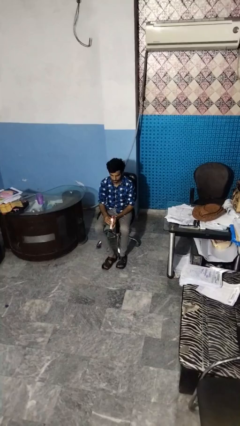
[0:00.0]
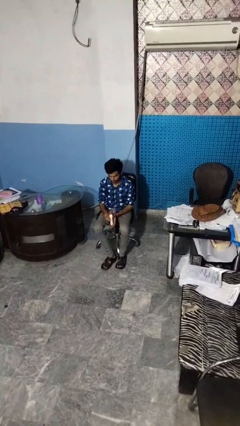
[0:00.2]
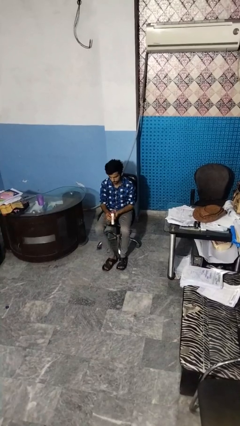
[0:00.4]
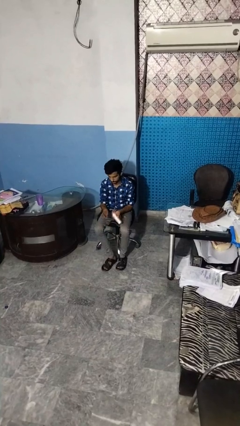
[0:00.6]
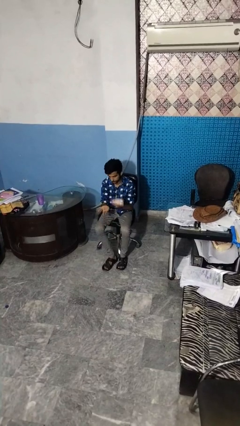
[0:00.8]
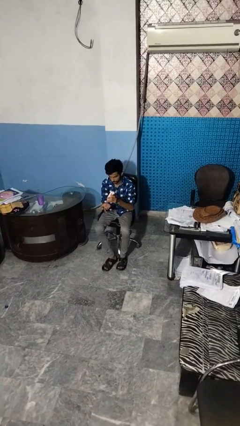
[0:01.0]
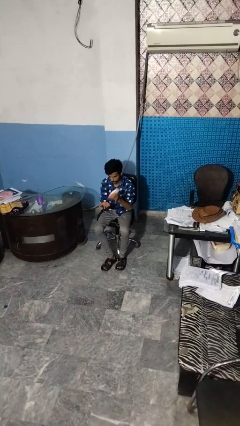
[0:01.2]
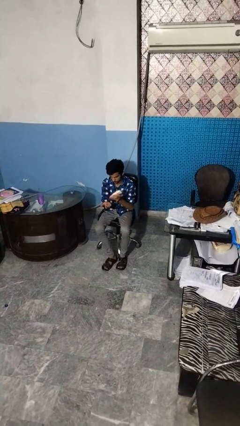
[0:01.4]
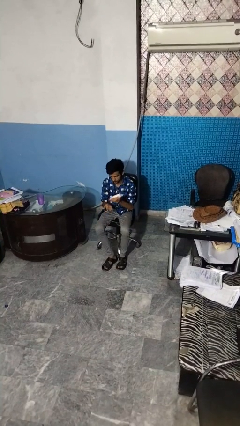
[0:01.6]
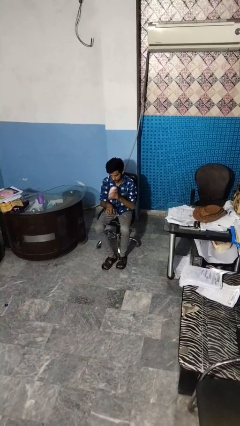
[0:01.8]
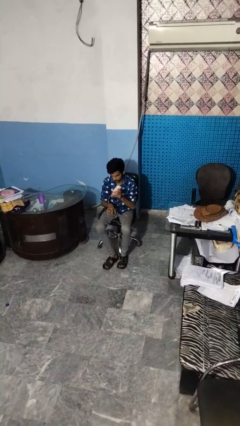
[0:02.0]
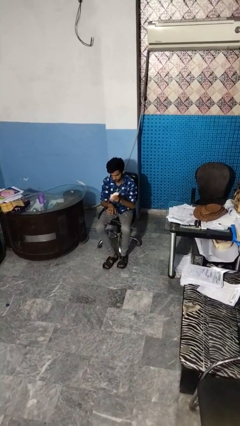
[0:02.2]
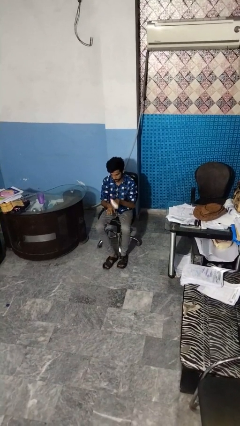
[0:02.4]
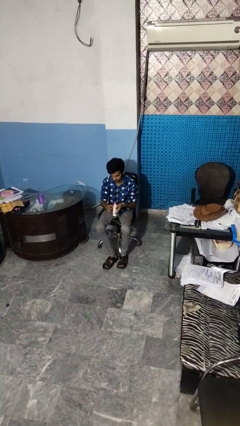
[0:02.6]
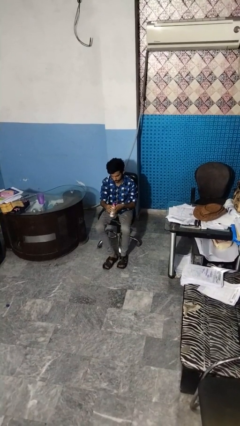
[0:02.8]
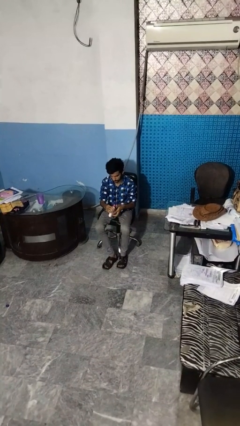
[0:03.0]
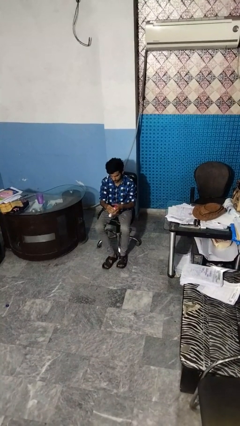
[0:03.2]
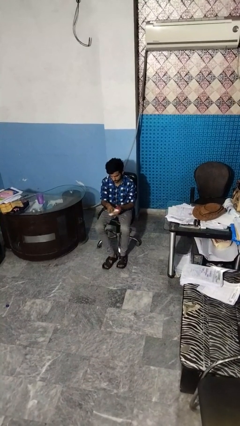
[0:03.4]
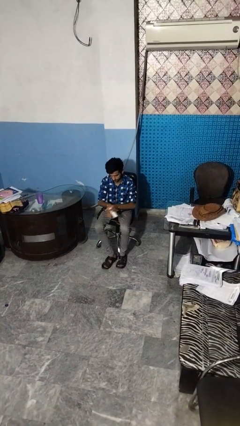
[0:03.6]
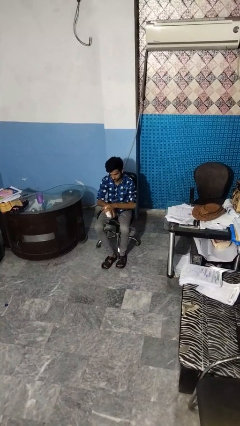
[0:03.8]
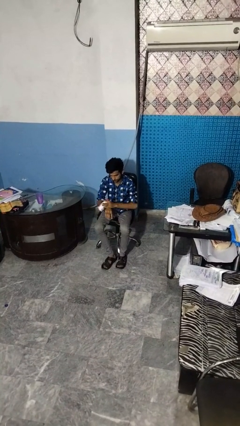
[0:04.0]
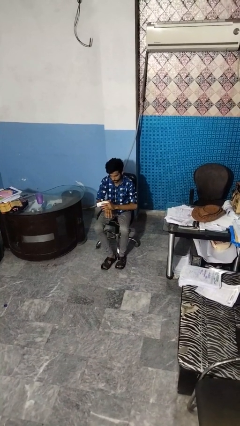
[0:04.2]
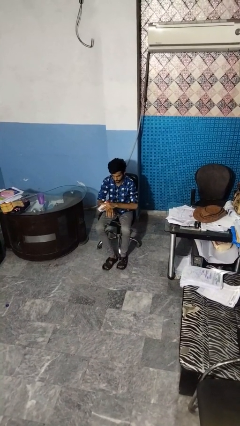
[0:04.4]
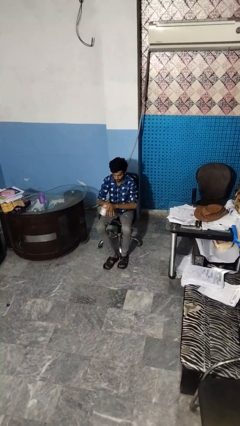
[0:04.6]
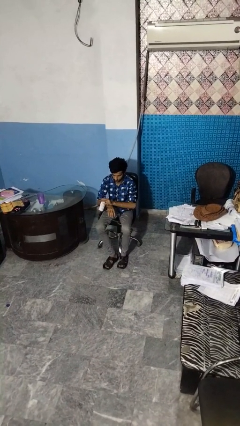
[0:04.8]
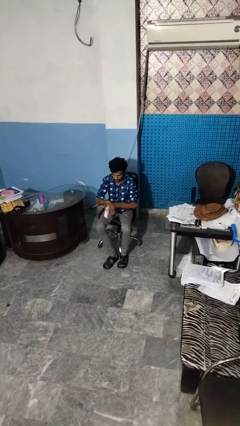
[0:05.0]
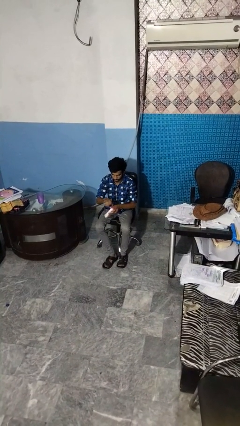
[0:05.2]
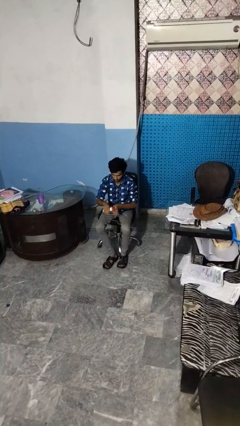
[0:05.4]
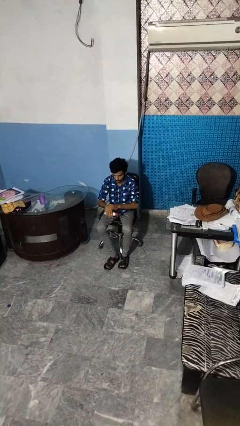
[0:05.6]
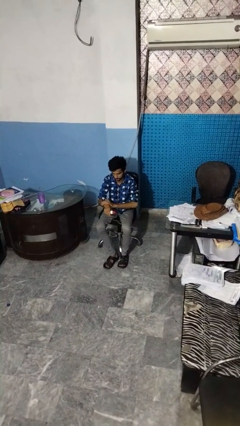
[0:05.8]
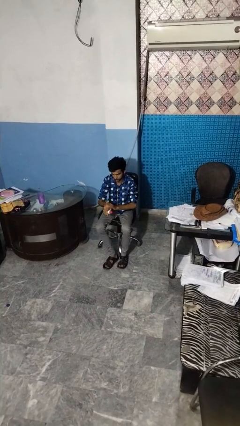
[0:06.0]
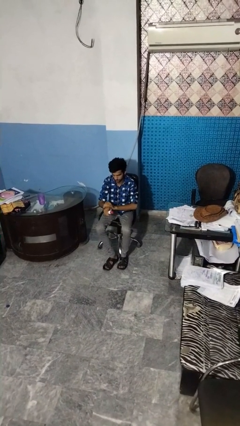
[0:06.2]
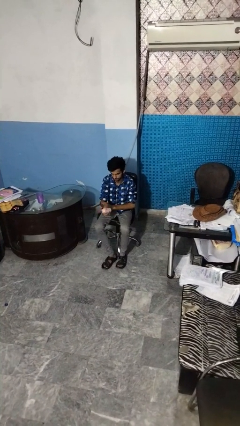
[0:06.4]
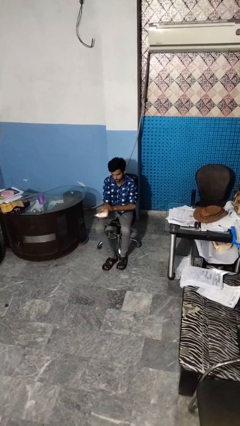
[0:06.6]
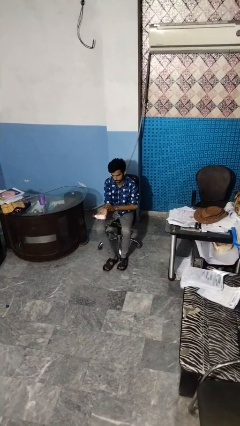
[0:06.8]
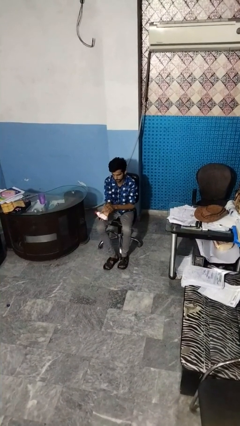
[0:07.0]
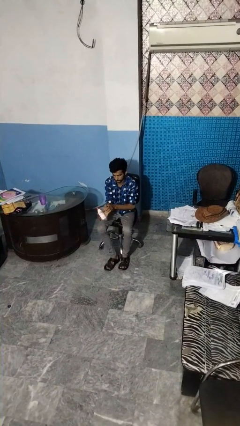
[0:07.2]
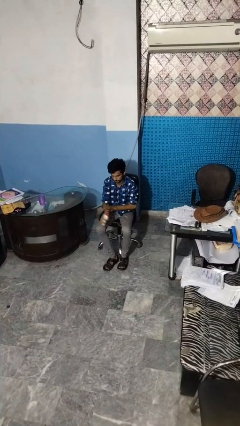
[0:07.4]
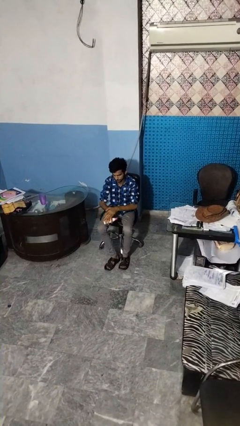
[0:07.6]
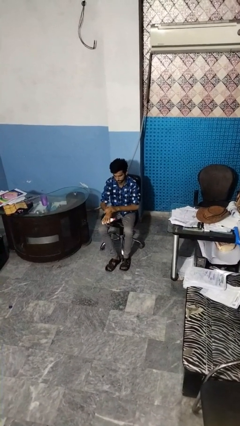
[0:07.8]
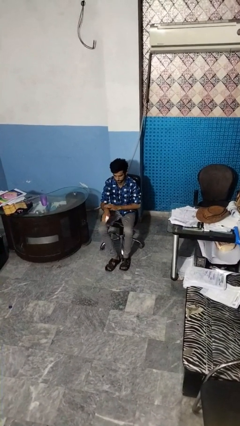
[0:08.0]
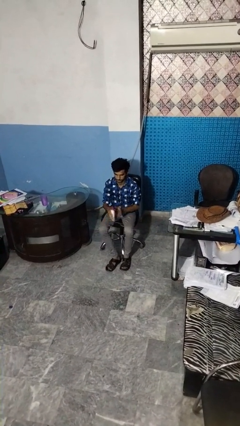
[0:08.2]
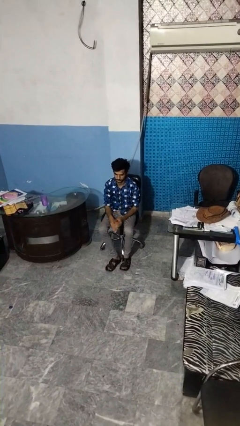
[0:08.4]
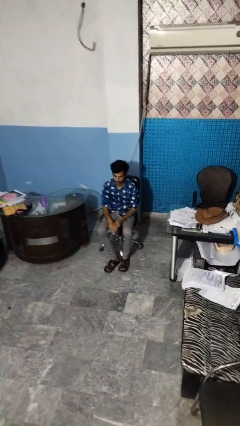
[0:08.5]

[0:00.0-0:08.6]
person applies sunscreen

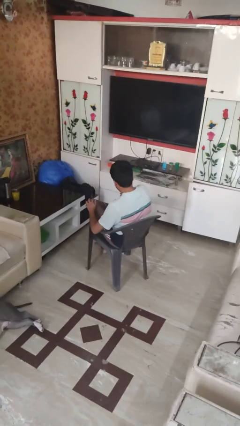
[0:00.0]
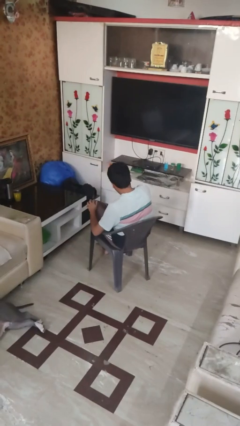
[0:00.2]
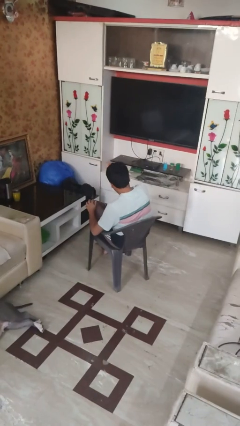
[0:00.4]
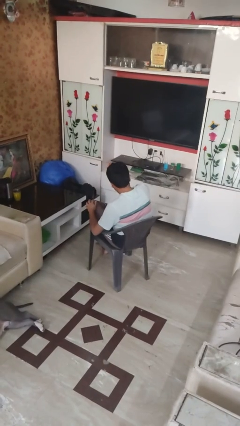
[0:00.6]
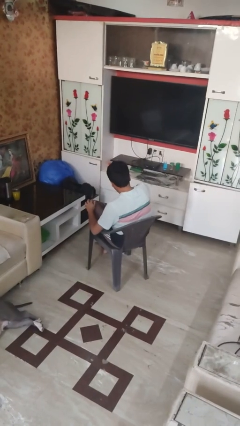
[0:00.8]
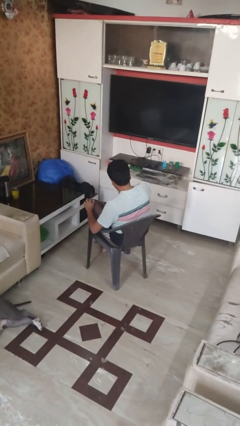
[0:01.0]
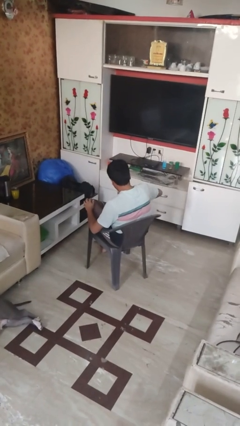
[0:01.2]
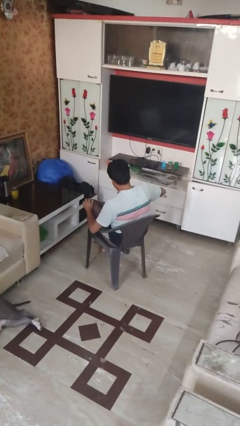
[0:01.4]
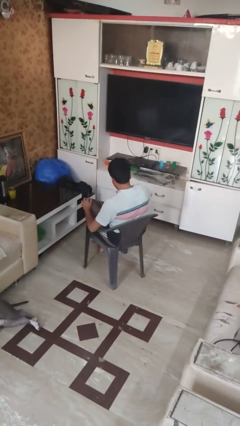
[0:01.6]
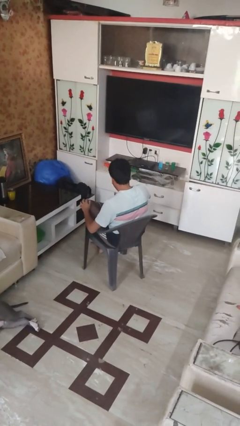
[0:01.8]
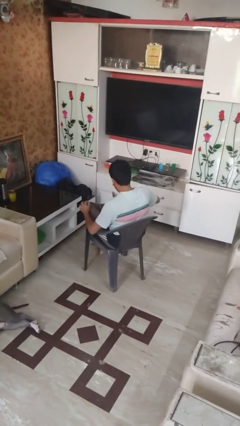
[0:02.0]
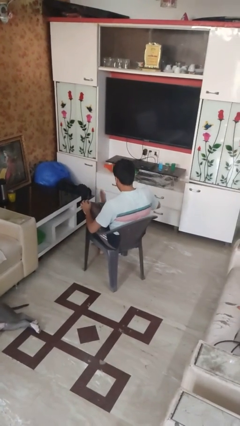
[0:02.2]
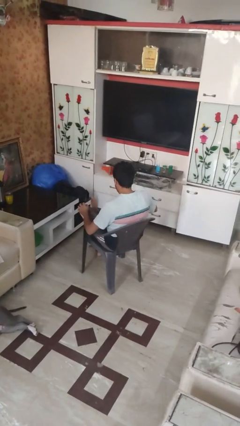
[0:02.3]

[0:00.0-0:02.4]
person rubs foot

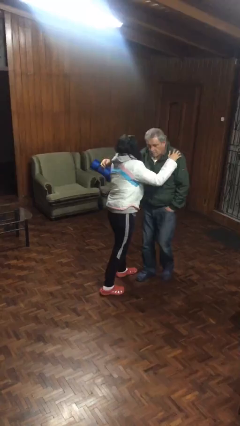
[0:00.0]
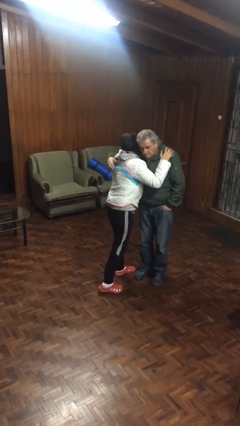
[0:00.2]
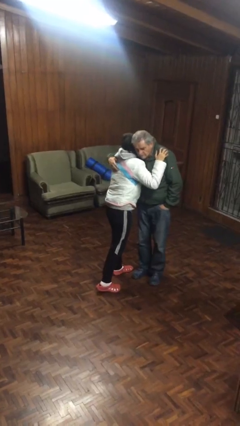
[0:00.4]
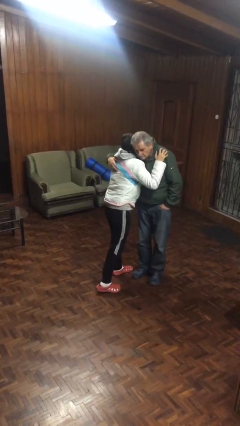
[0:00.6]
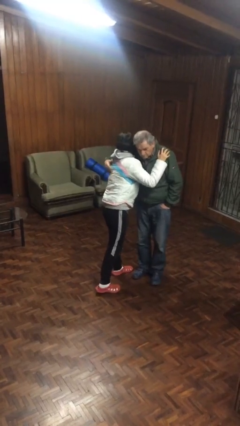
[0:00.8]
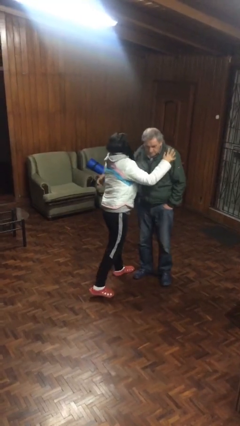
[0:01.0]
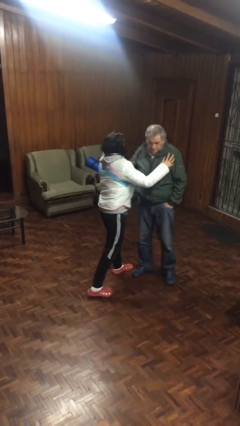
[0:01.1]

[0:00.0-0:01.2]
person embraces person

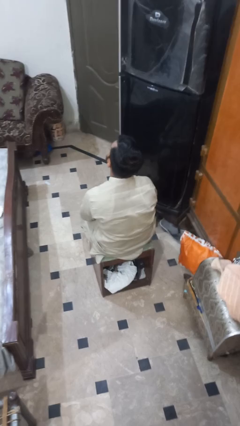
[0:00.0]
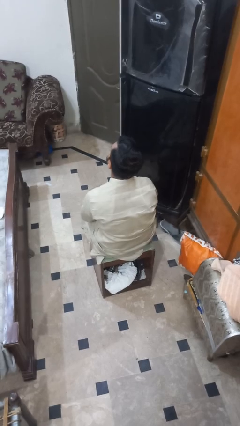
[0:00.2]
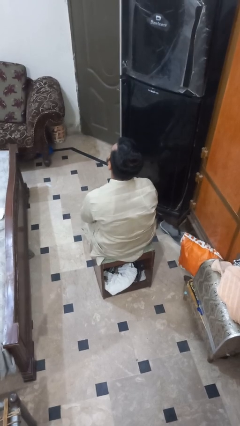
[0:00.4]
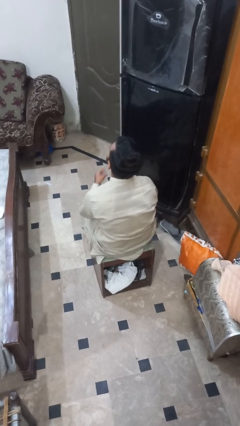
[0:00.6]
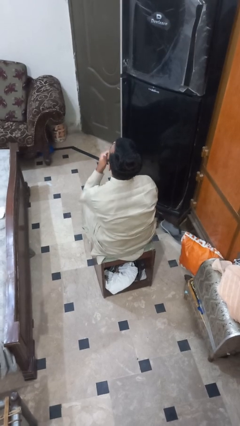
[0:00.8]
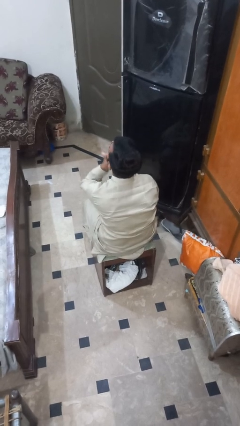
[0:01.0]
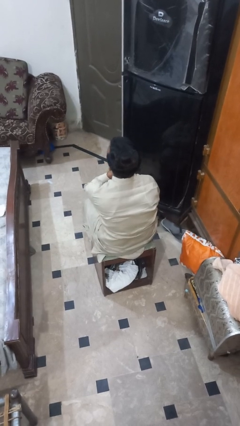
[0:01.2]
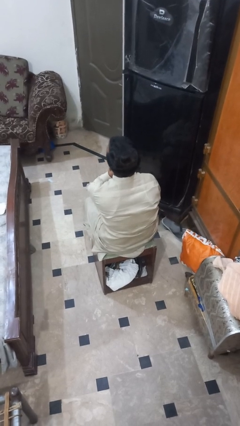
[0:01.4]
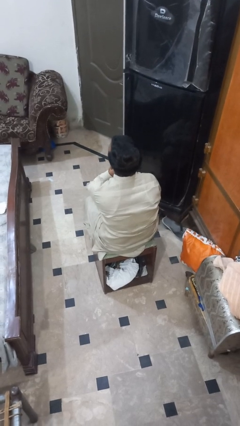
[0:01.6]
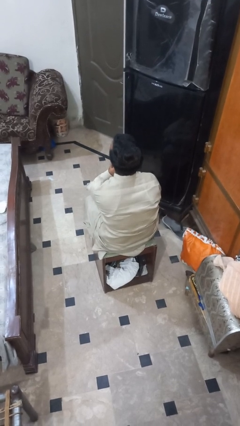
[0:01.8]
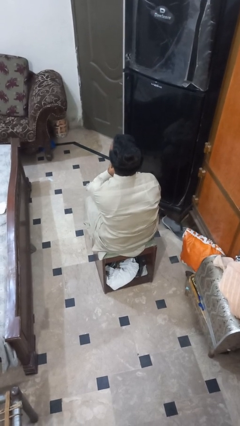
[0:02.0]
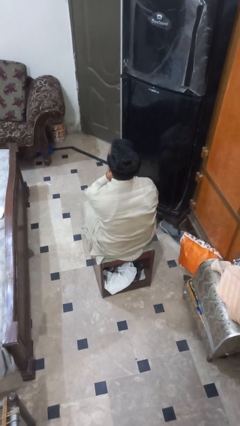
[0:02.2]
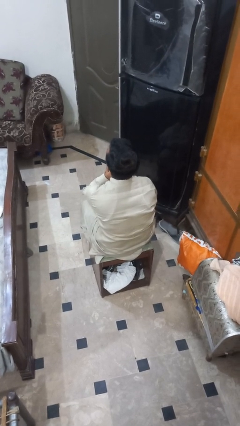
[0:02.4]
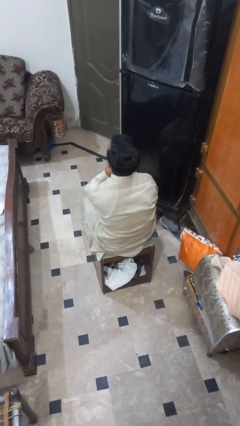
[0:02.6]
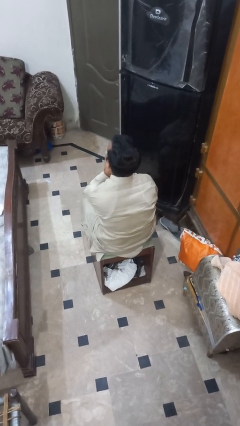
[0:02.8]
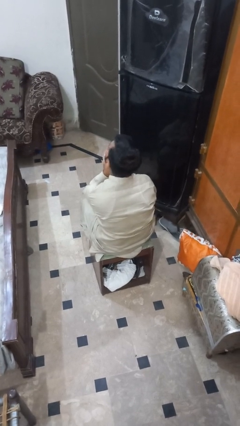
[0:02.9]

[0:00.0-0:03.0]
person strokes chin

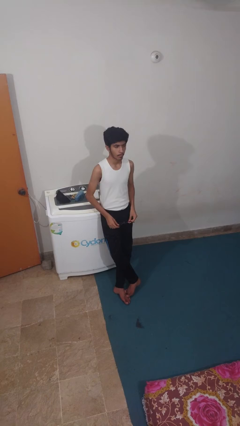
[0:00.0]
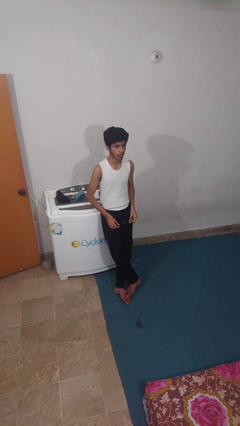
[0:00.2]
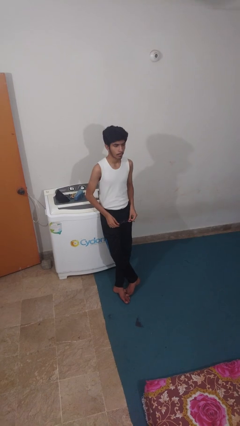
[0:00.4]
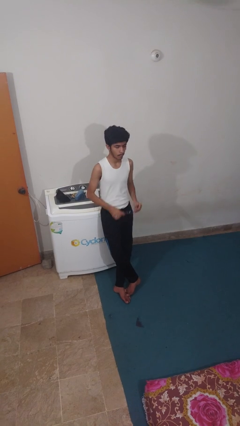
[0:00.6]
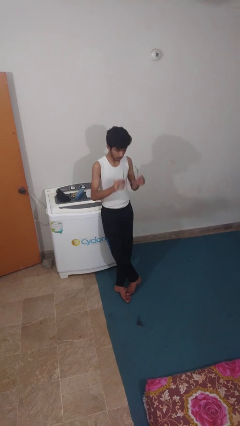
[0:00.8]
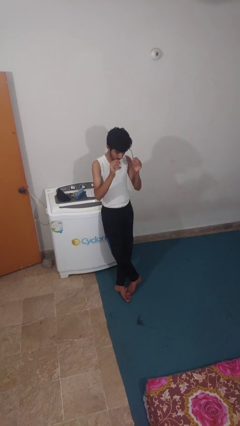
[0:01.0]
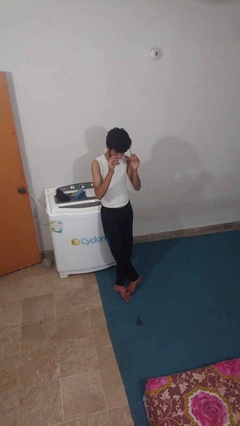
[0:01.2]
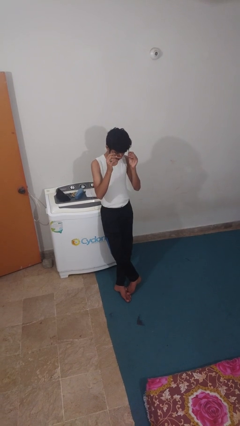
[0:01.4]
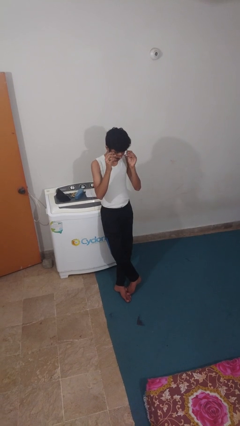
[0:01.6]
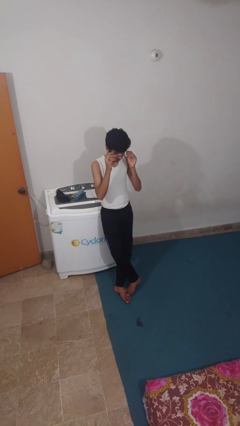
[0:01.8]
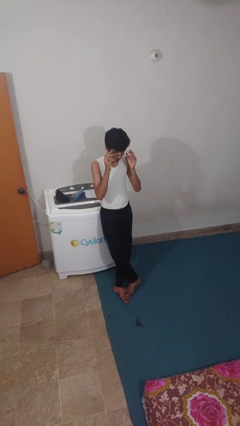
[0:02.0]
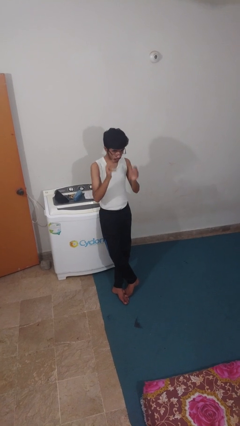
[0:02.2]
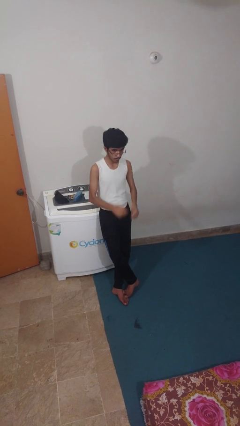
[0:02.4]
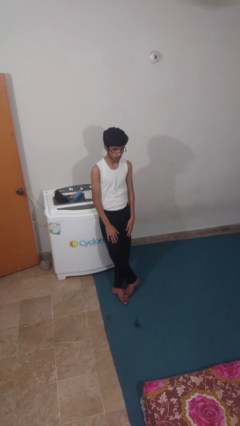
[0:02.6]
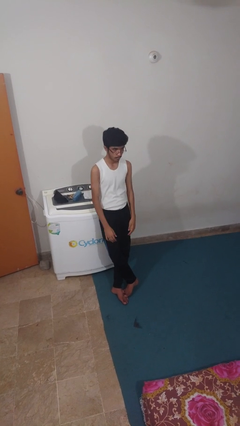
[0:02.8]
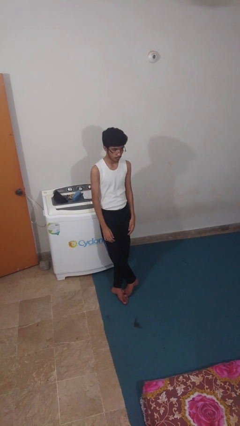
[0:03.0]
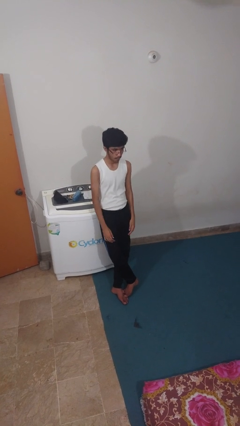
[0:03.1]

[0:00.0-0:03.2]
person puts on glasses
